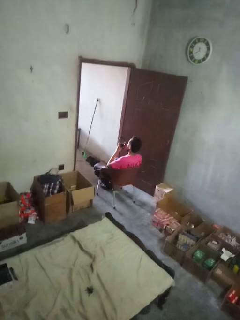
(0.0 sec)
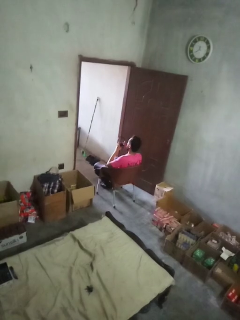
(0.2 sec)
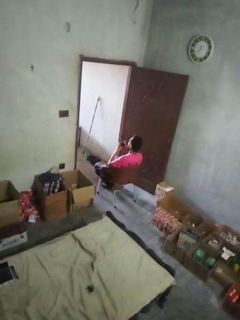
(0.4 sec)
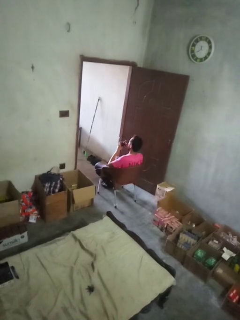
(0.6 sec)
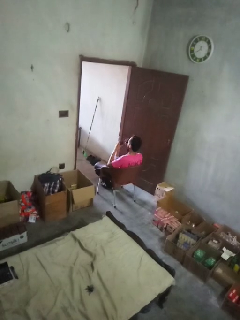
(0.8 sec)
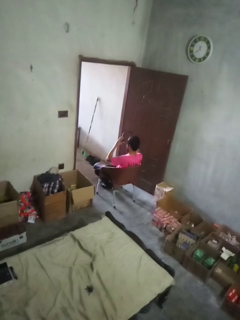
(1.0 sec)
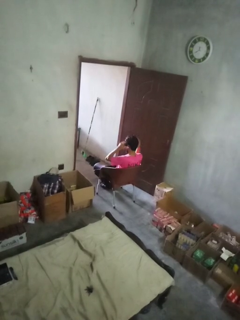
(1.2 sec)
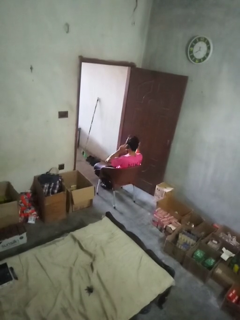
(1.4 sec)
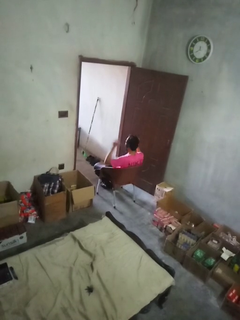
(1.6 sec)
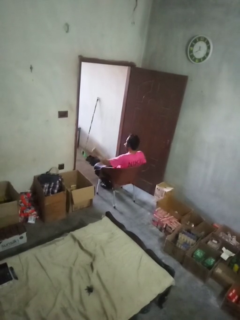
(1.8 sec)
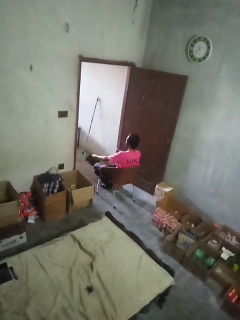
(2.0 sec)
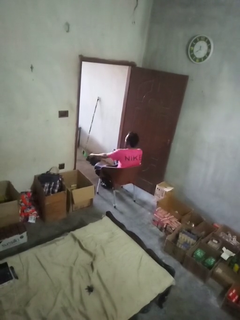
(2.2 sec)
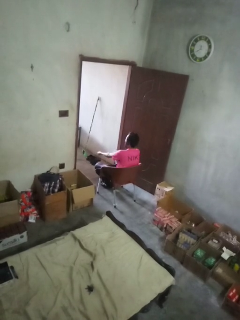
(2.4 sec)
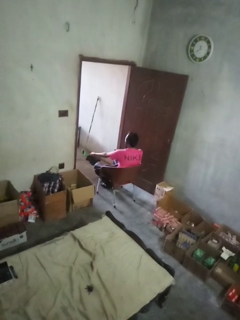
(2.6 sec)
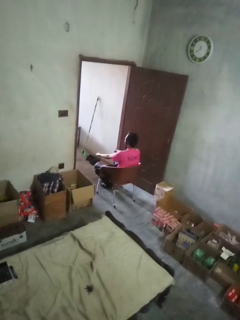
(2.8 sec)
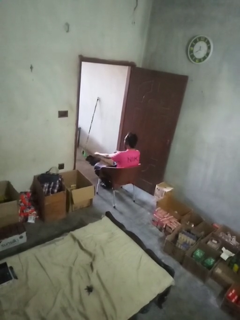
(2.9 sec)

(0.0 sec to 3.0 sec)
person puts on headphones

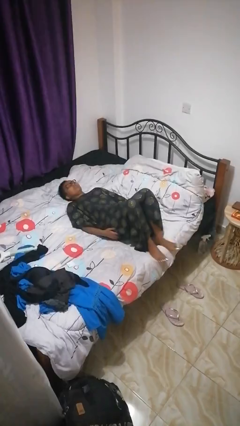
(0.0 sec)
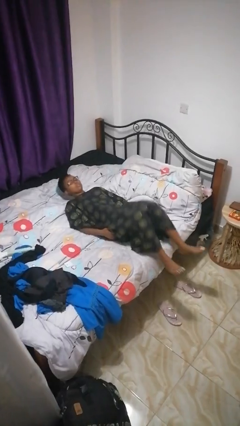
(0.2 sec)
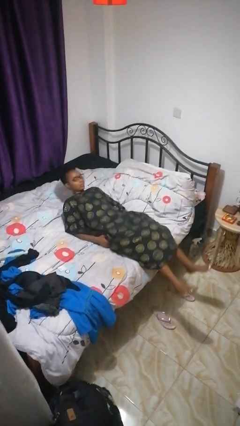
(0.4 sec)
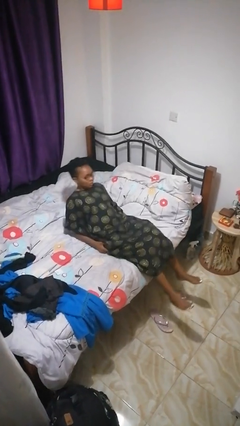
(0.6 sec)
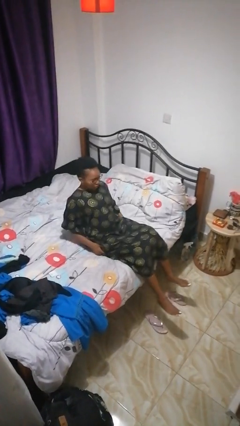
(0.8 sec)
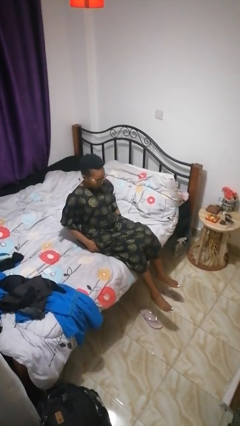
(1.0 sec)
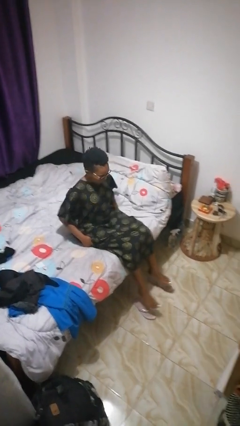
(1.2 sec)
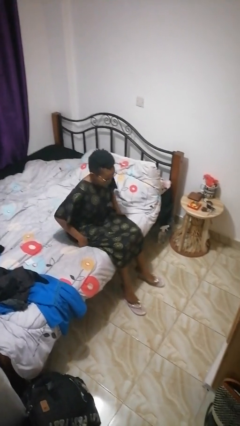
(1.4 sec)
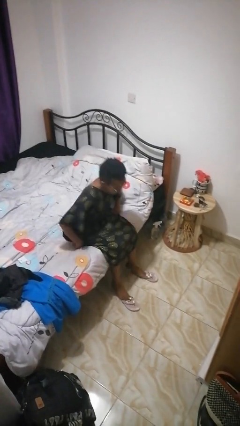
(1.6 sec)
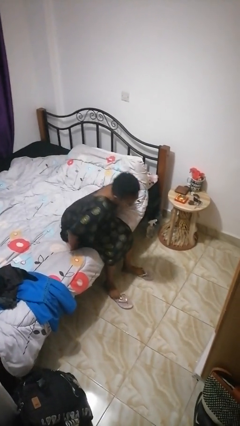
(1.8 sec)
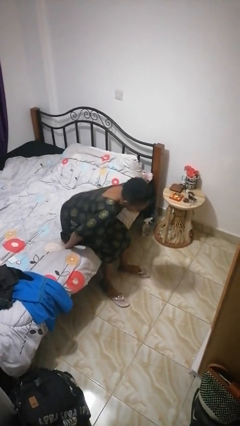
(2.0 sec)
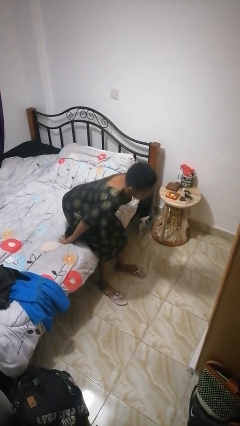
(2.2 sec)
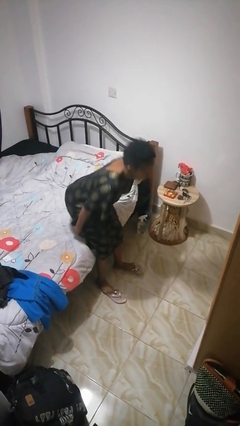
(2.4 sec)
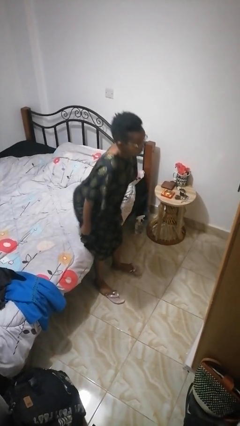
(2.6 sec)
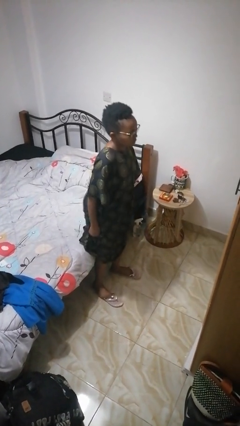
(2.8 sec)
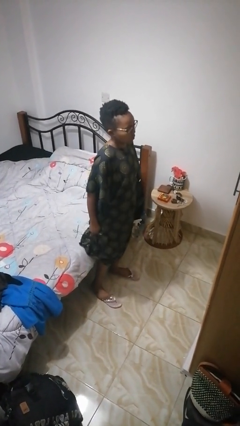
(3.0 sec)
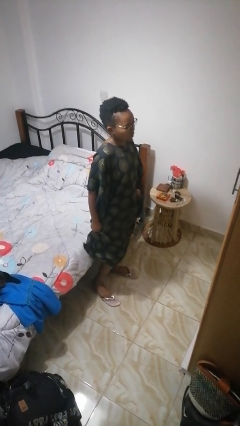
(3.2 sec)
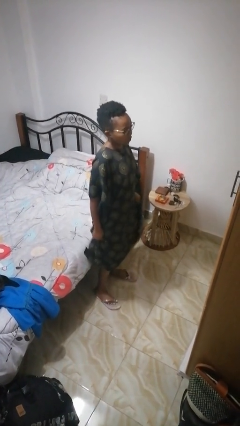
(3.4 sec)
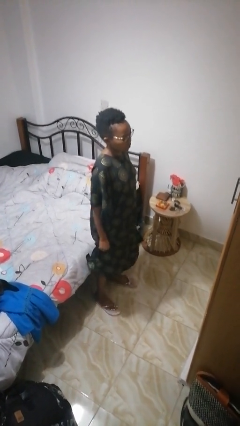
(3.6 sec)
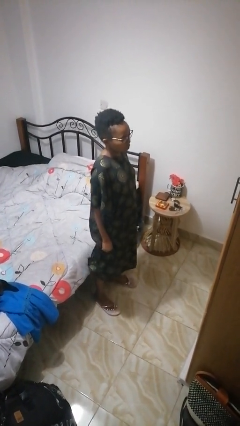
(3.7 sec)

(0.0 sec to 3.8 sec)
person stands up

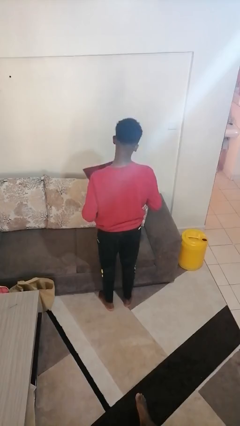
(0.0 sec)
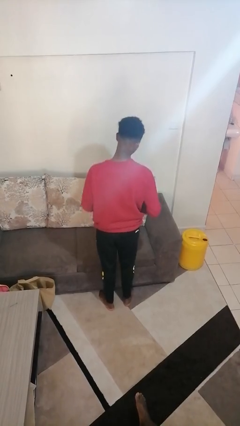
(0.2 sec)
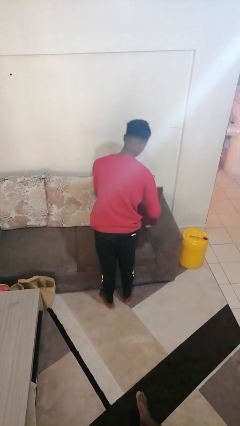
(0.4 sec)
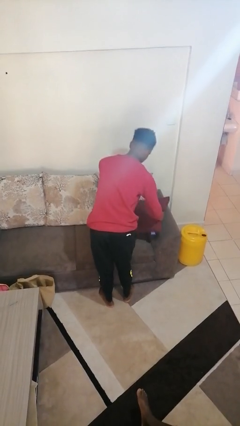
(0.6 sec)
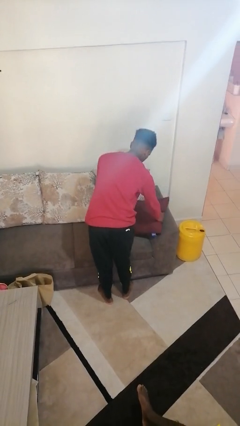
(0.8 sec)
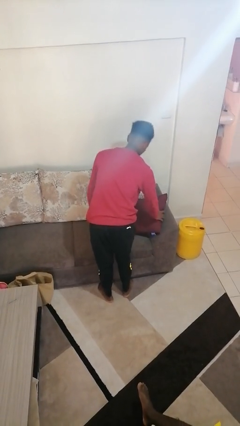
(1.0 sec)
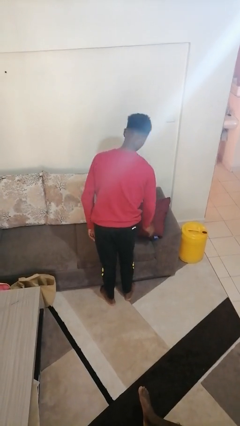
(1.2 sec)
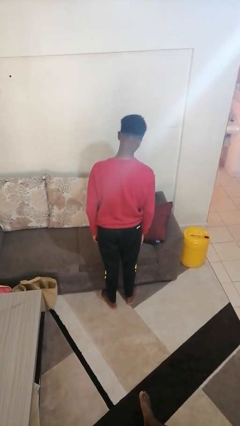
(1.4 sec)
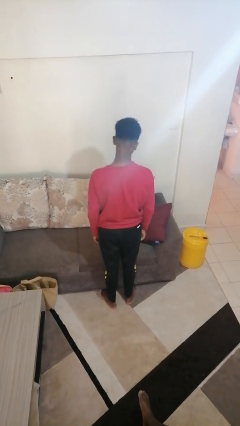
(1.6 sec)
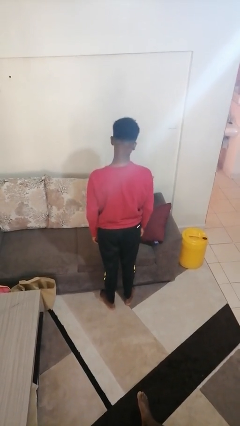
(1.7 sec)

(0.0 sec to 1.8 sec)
person puts down object on couch

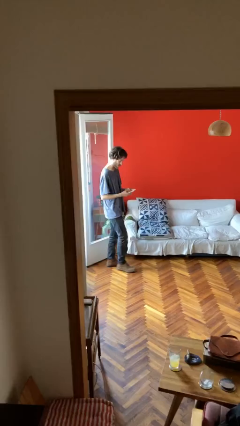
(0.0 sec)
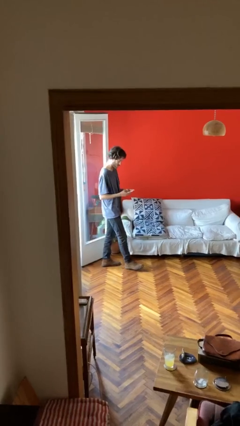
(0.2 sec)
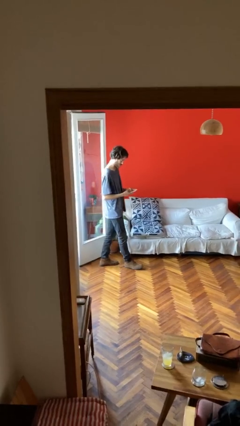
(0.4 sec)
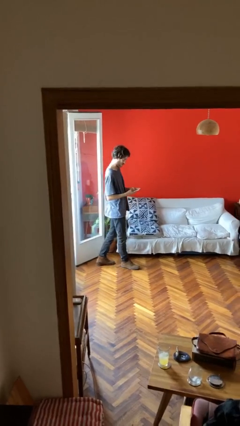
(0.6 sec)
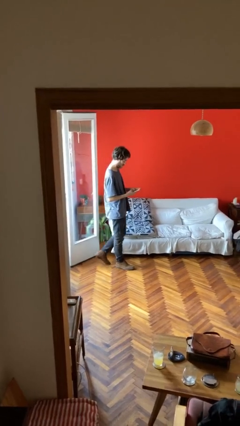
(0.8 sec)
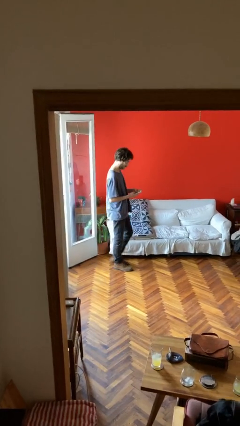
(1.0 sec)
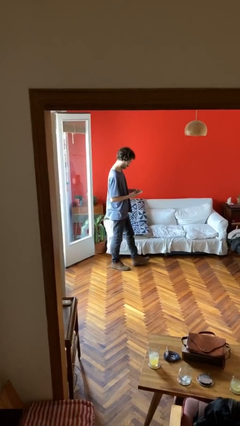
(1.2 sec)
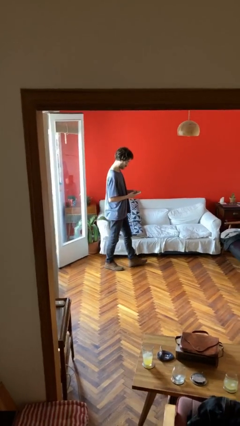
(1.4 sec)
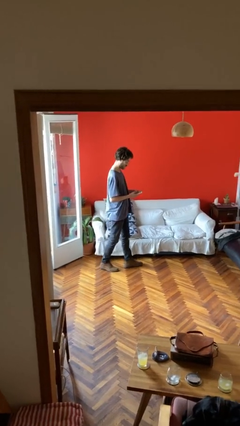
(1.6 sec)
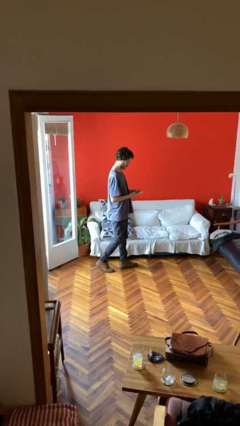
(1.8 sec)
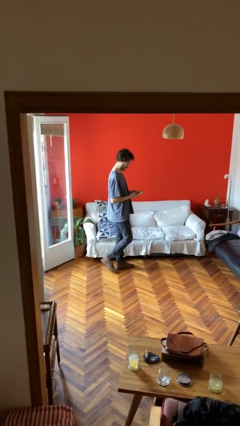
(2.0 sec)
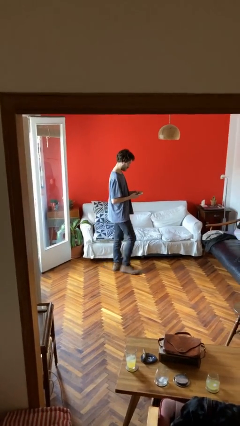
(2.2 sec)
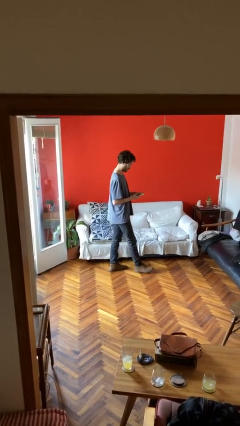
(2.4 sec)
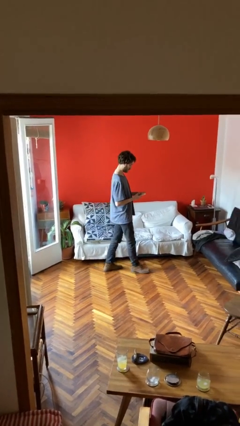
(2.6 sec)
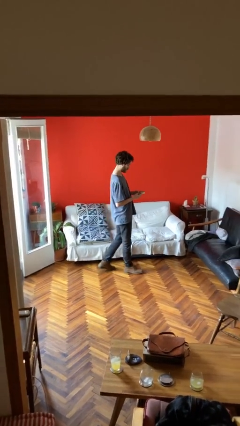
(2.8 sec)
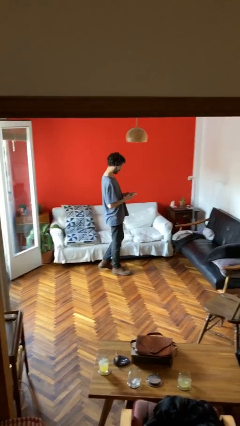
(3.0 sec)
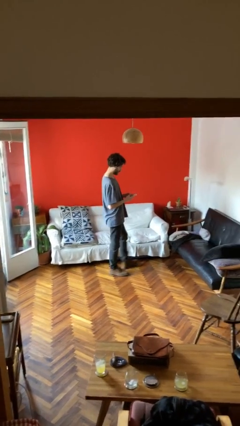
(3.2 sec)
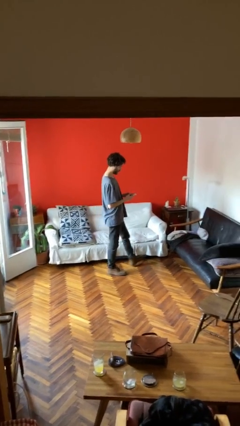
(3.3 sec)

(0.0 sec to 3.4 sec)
person texts on phone

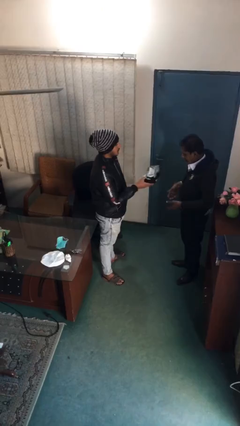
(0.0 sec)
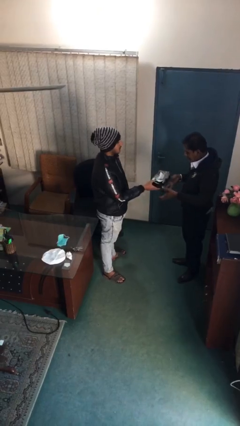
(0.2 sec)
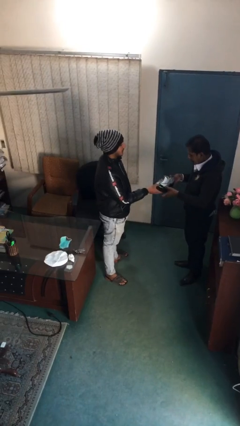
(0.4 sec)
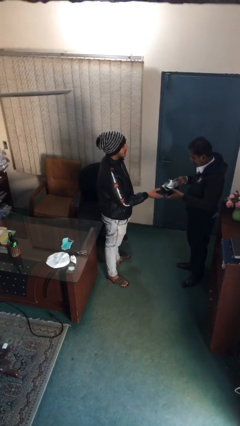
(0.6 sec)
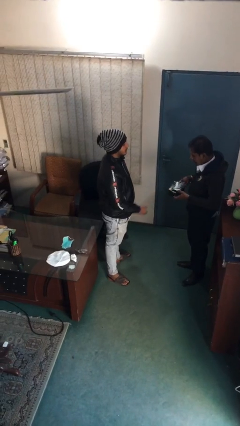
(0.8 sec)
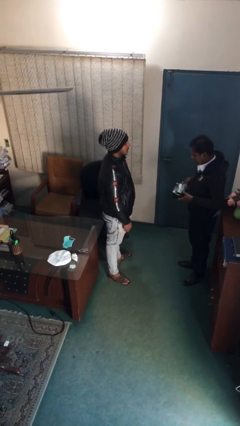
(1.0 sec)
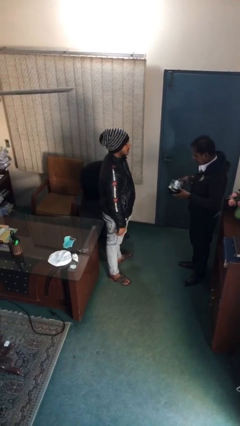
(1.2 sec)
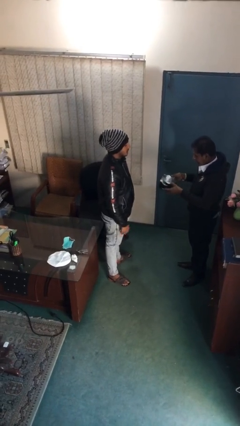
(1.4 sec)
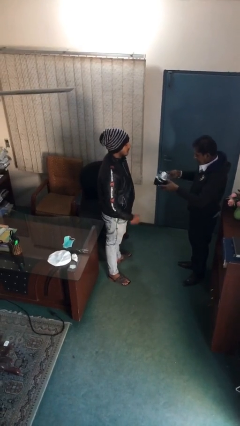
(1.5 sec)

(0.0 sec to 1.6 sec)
person transfers object to person

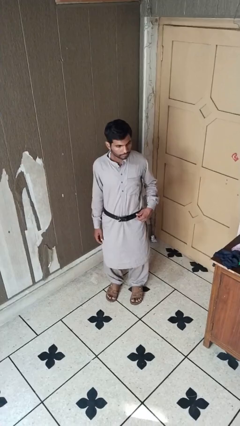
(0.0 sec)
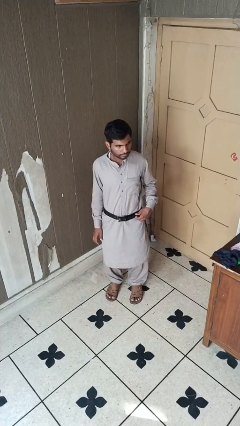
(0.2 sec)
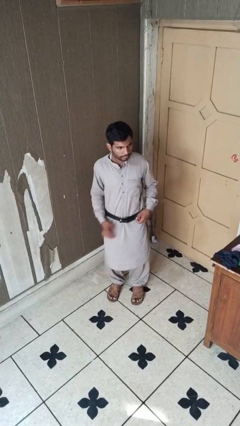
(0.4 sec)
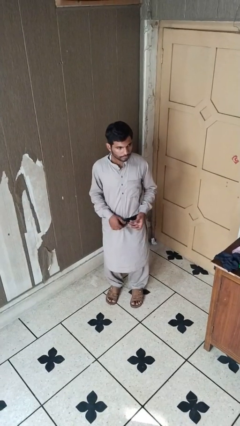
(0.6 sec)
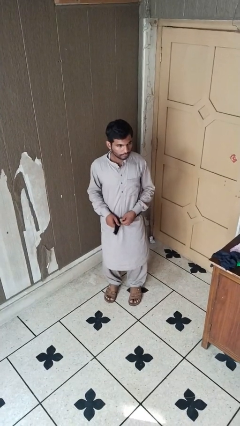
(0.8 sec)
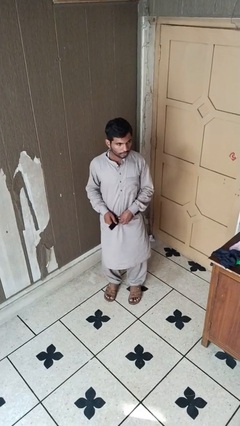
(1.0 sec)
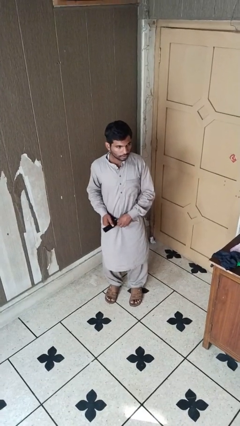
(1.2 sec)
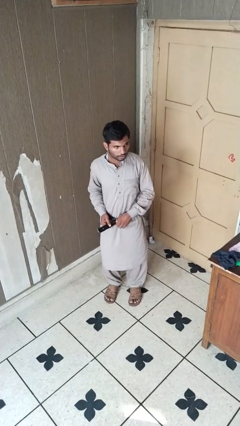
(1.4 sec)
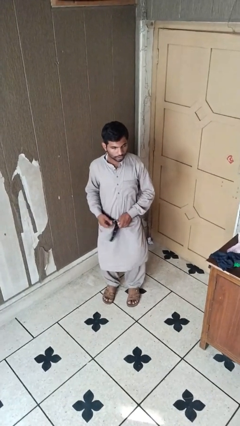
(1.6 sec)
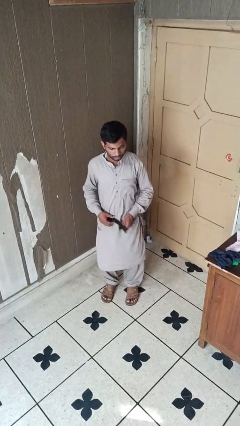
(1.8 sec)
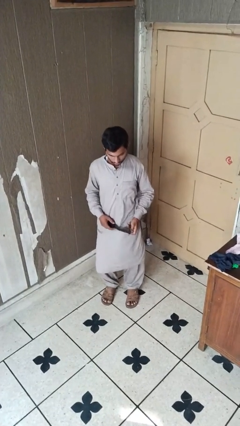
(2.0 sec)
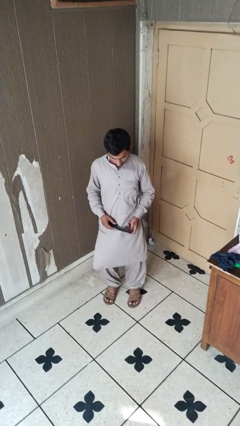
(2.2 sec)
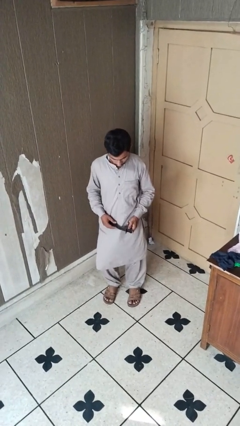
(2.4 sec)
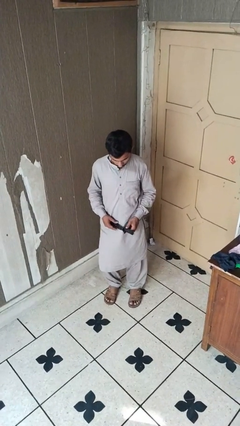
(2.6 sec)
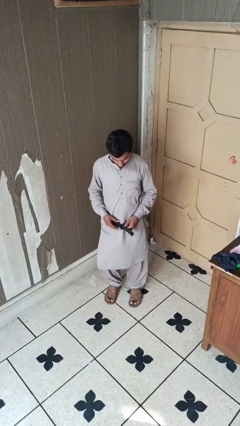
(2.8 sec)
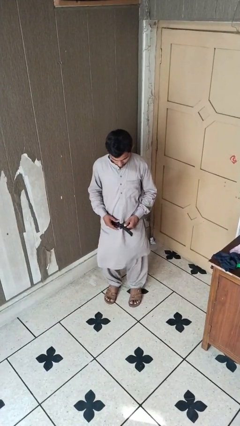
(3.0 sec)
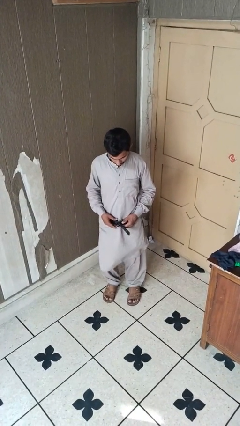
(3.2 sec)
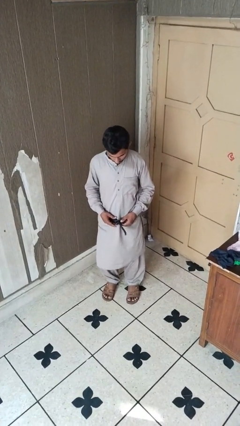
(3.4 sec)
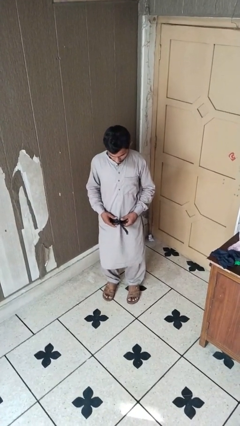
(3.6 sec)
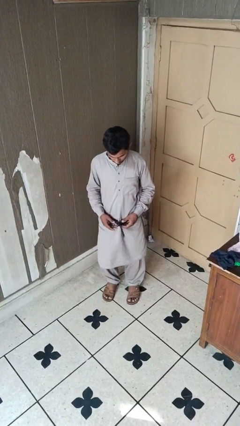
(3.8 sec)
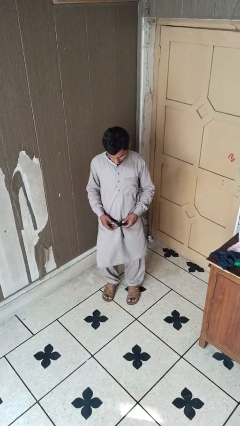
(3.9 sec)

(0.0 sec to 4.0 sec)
person takes off belt
